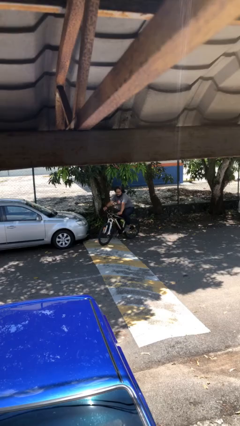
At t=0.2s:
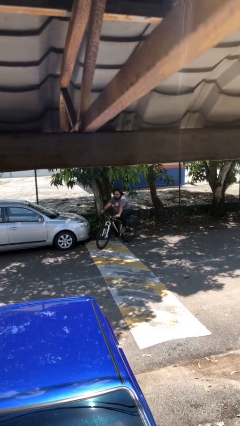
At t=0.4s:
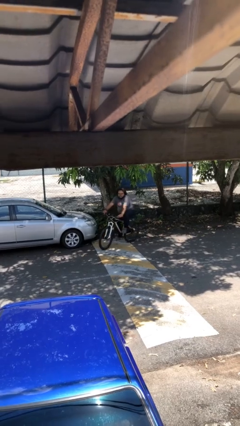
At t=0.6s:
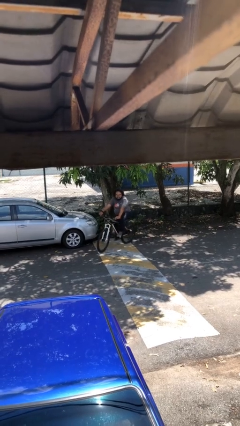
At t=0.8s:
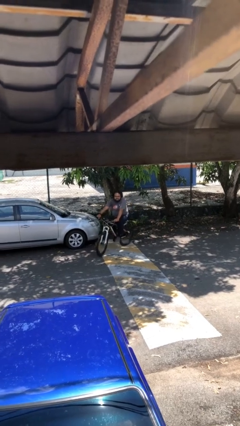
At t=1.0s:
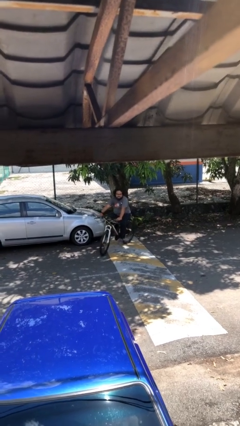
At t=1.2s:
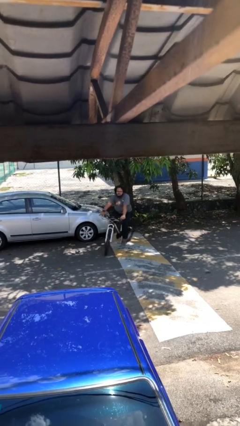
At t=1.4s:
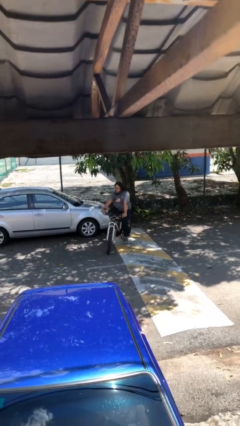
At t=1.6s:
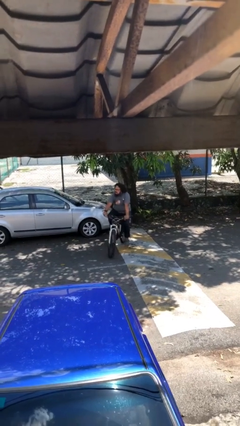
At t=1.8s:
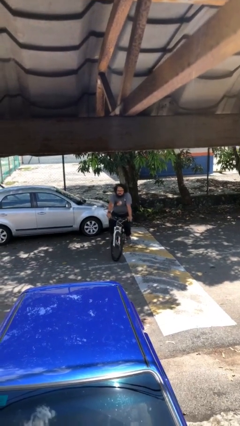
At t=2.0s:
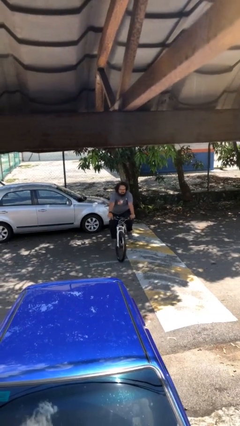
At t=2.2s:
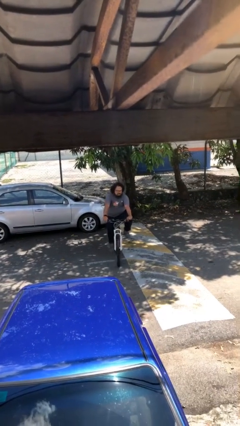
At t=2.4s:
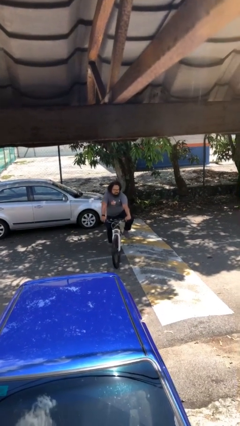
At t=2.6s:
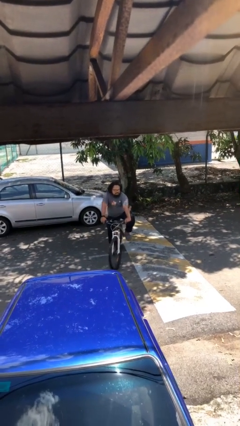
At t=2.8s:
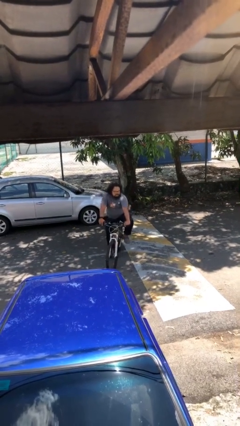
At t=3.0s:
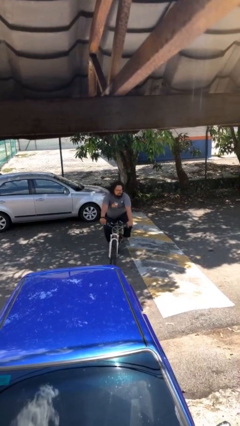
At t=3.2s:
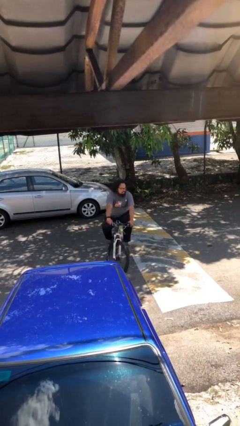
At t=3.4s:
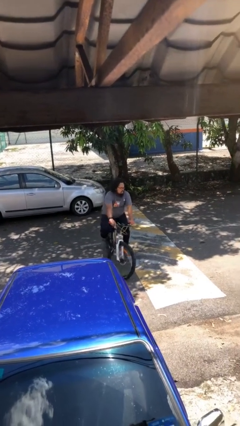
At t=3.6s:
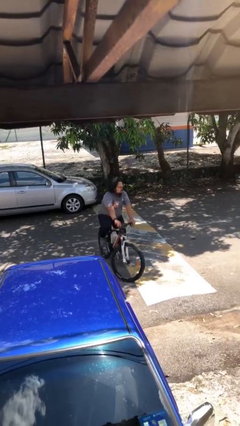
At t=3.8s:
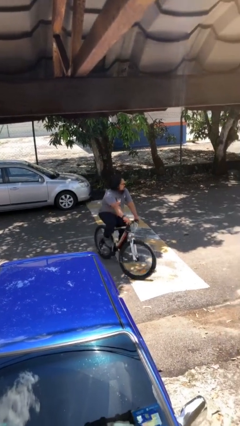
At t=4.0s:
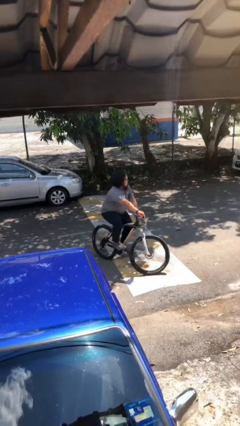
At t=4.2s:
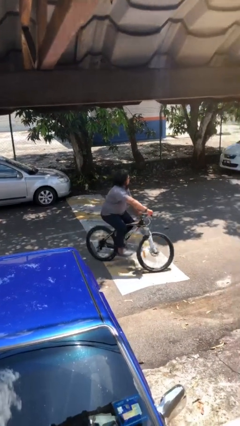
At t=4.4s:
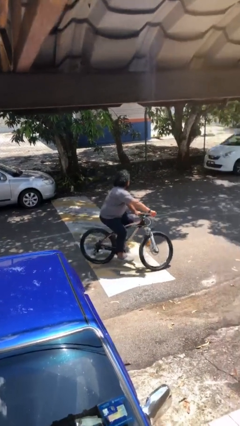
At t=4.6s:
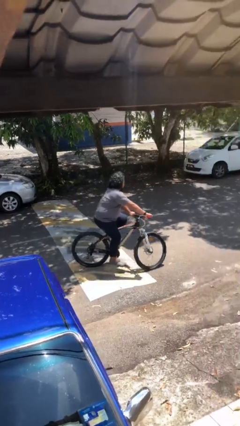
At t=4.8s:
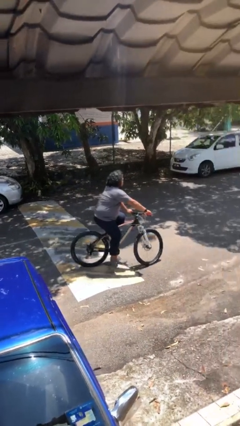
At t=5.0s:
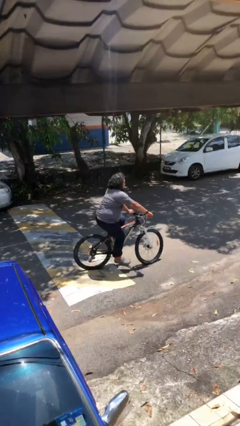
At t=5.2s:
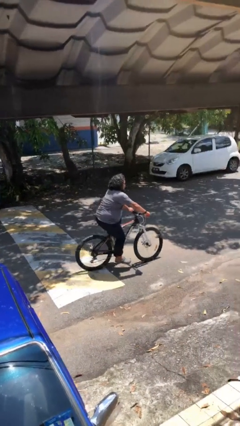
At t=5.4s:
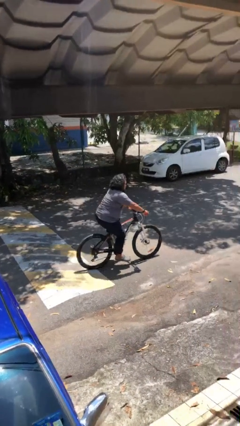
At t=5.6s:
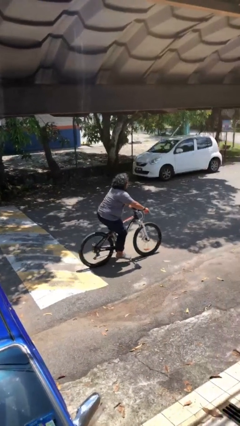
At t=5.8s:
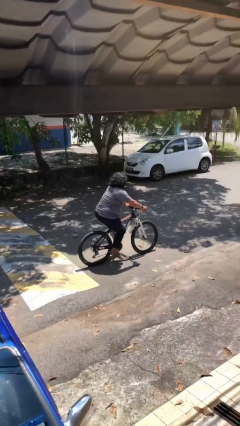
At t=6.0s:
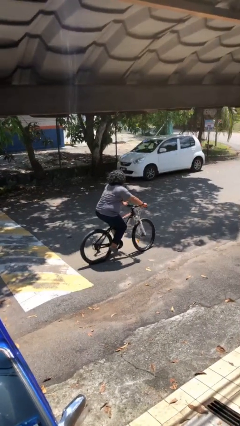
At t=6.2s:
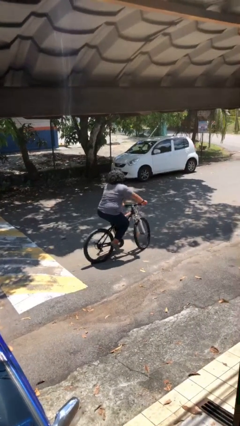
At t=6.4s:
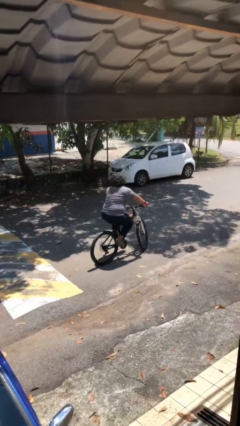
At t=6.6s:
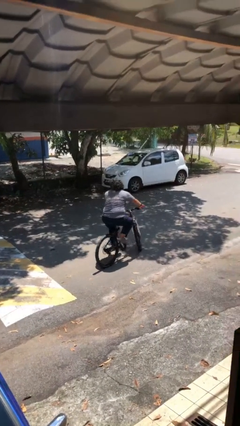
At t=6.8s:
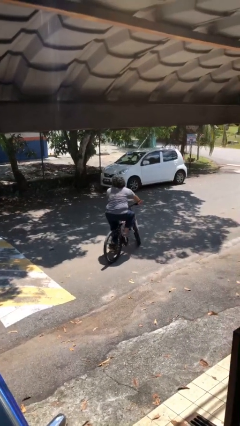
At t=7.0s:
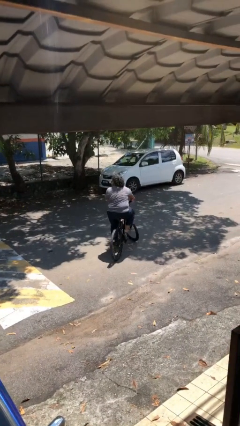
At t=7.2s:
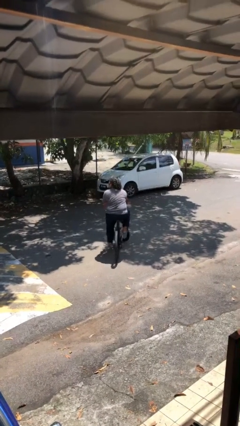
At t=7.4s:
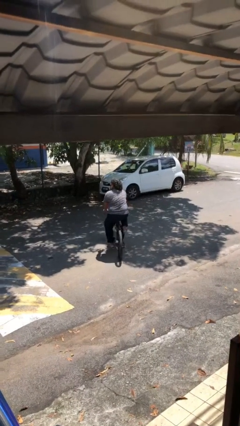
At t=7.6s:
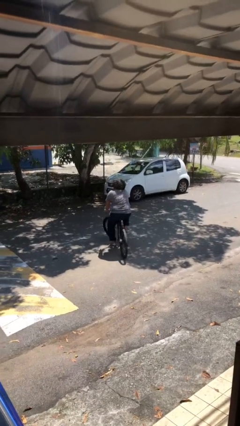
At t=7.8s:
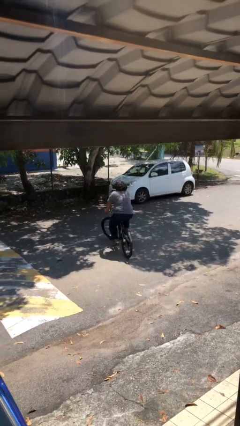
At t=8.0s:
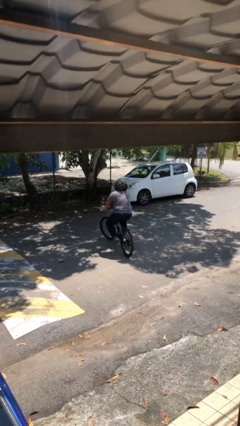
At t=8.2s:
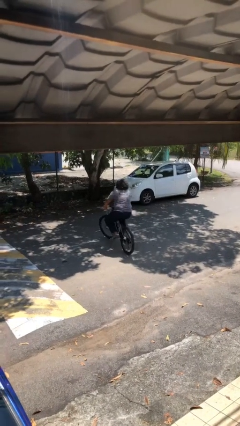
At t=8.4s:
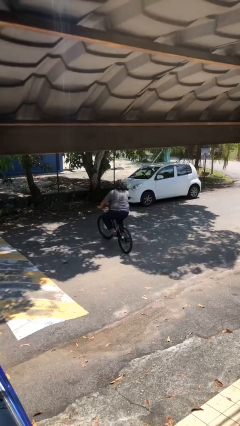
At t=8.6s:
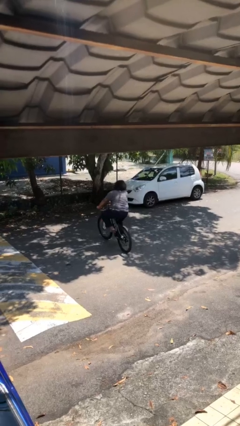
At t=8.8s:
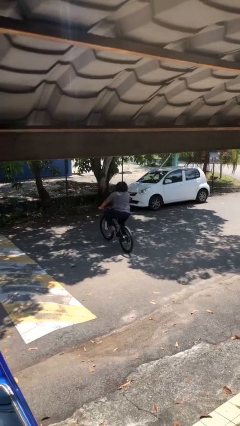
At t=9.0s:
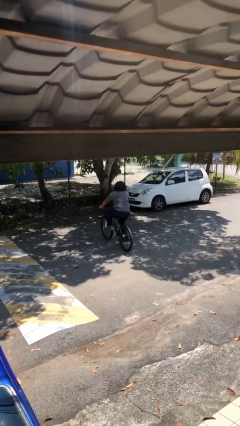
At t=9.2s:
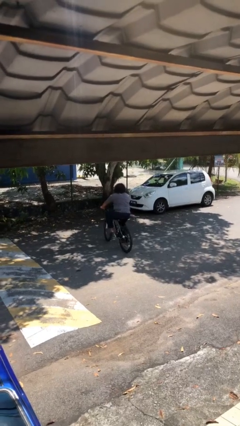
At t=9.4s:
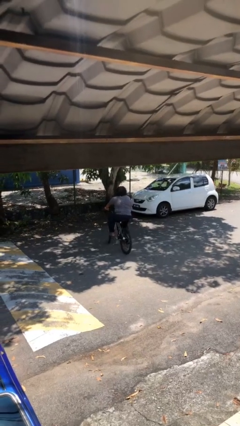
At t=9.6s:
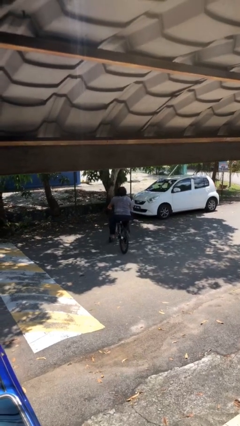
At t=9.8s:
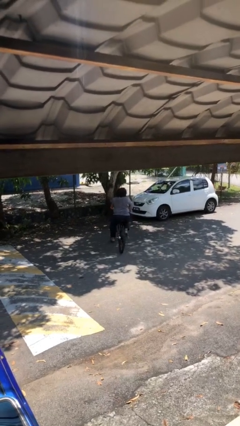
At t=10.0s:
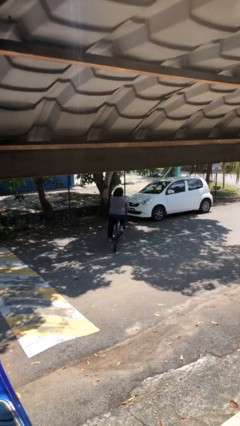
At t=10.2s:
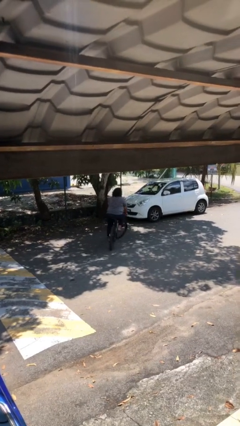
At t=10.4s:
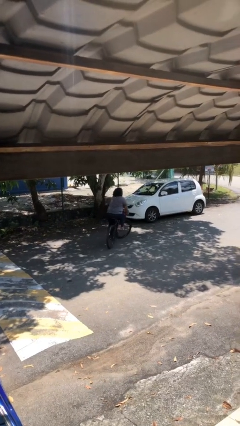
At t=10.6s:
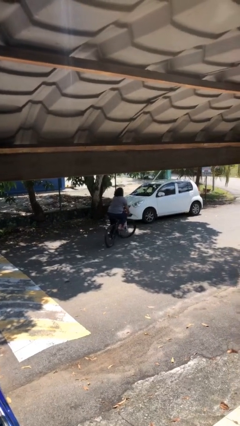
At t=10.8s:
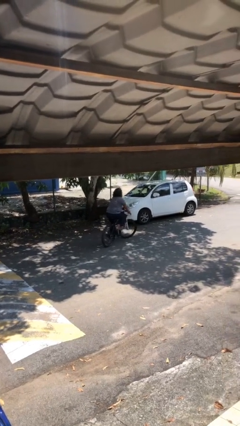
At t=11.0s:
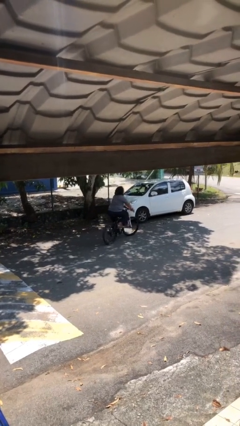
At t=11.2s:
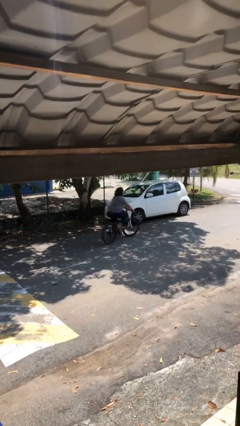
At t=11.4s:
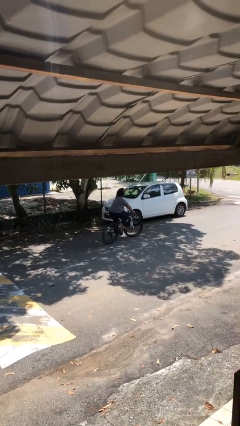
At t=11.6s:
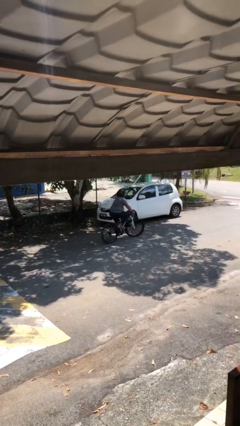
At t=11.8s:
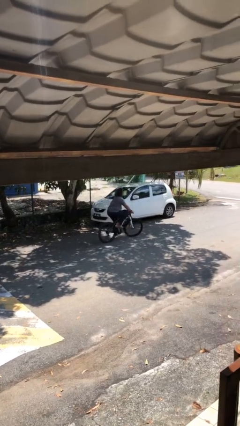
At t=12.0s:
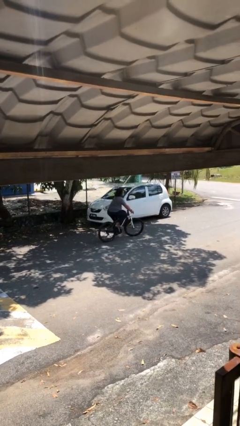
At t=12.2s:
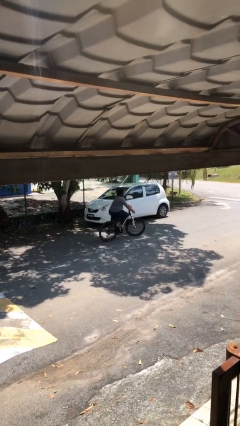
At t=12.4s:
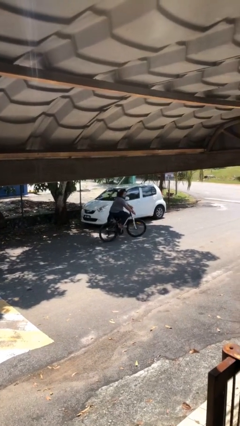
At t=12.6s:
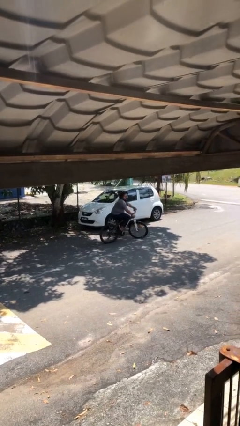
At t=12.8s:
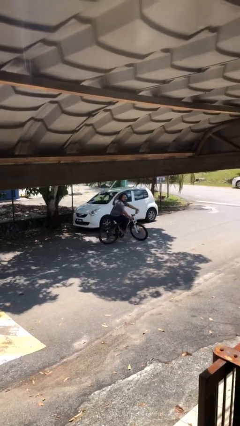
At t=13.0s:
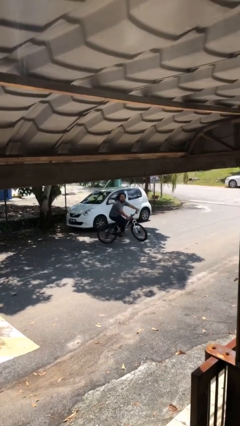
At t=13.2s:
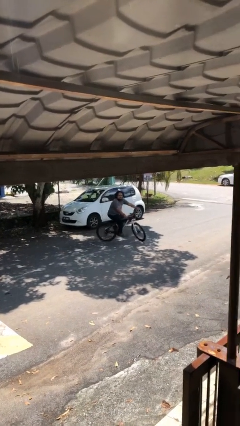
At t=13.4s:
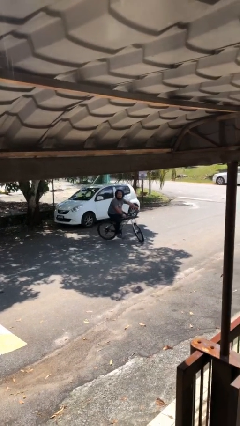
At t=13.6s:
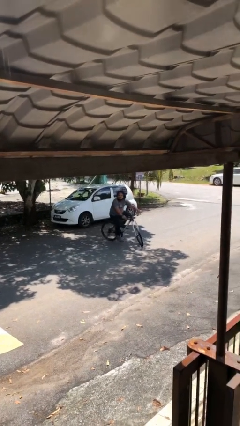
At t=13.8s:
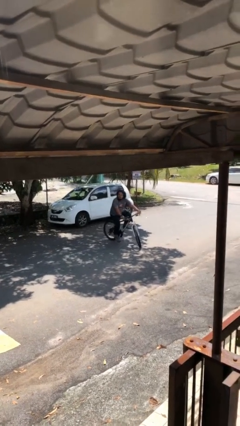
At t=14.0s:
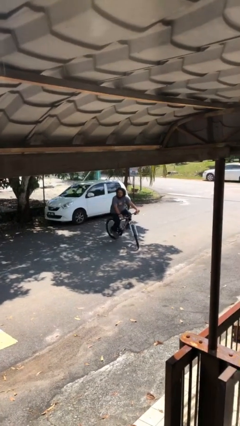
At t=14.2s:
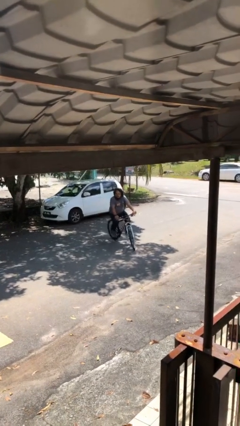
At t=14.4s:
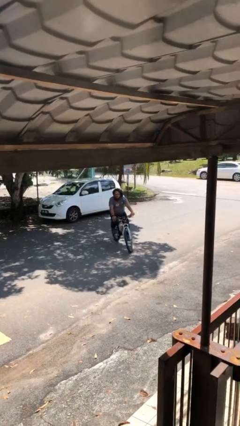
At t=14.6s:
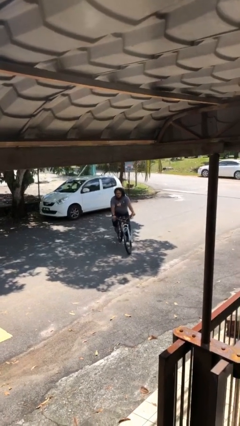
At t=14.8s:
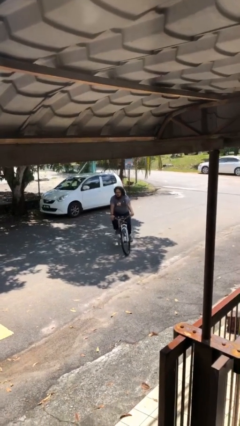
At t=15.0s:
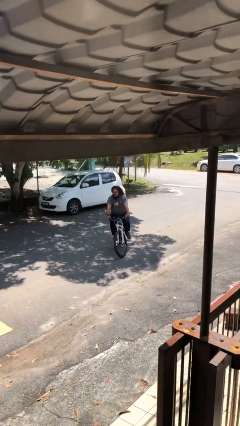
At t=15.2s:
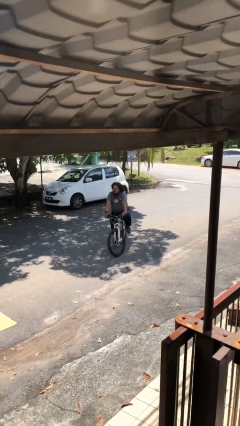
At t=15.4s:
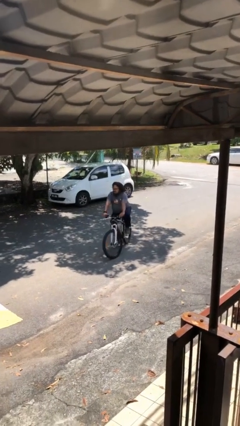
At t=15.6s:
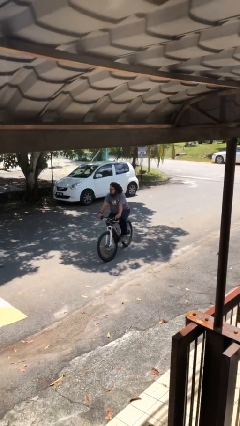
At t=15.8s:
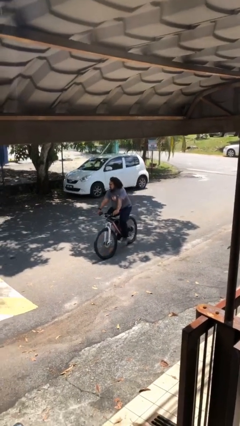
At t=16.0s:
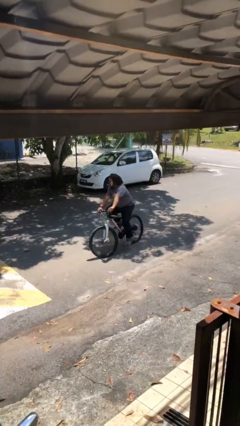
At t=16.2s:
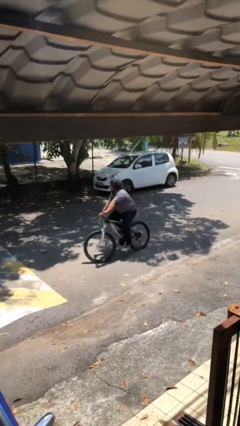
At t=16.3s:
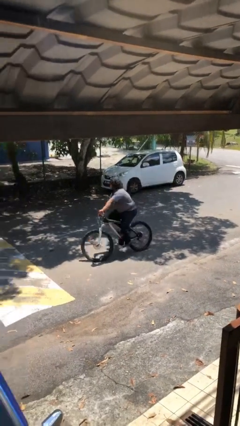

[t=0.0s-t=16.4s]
person rides bicycle

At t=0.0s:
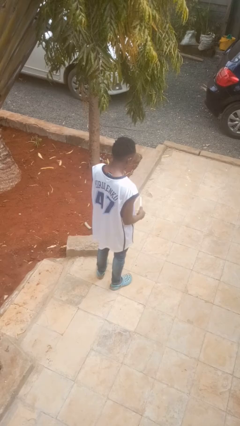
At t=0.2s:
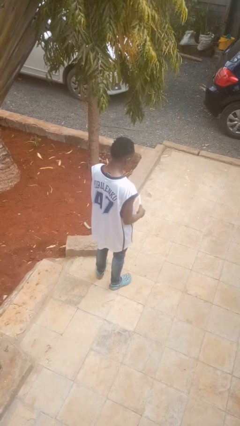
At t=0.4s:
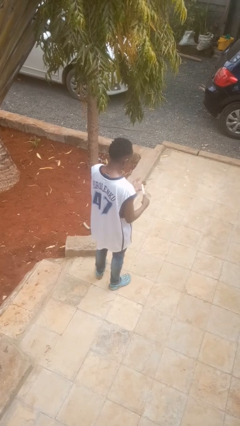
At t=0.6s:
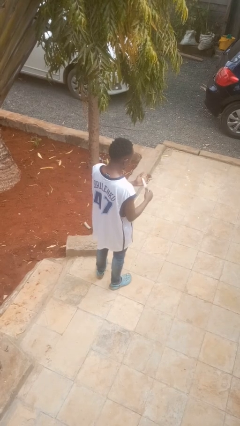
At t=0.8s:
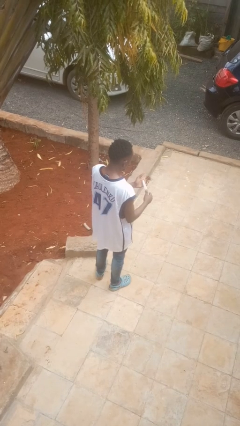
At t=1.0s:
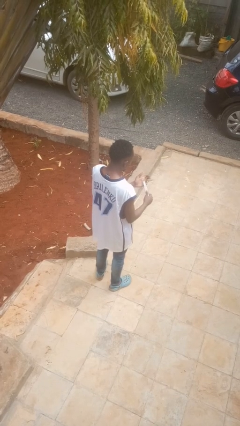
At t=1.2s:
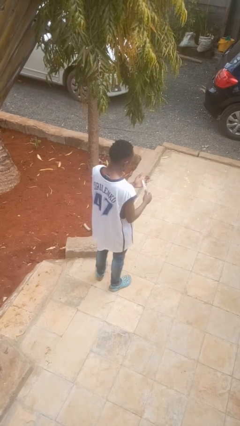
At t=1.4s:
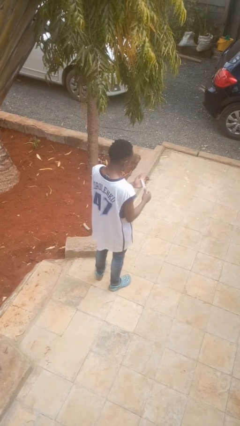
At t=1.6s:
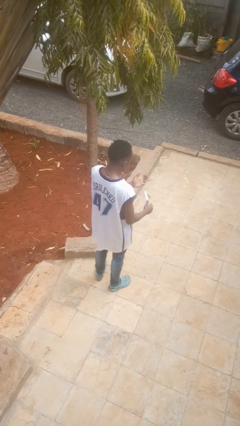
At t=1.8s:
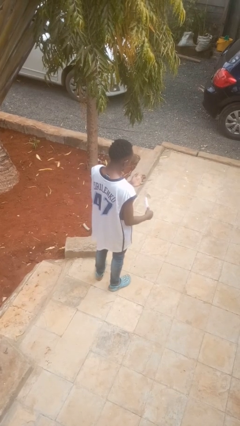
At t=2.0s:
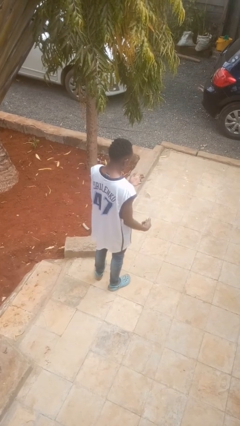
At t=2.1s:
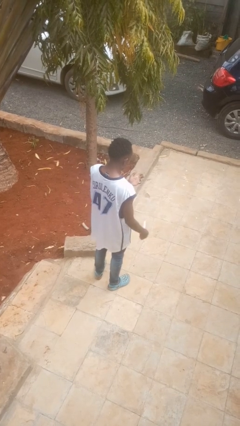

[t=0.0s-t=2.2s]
person files fingernails
